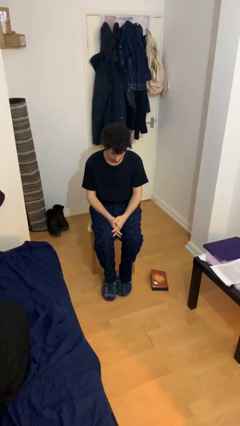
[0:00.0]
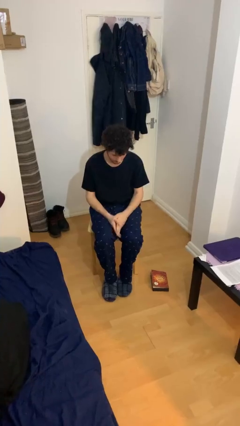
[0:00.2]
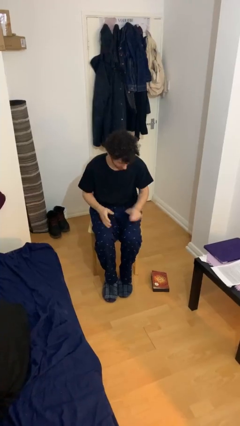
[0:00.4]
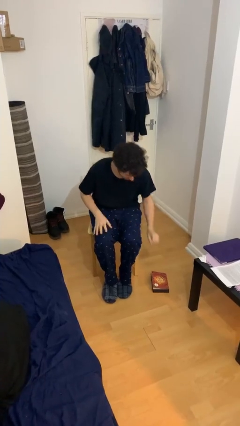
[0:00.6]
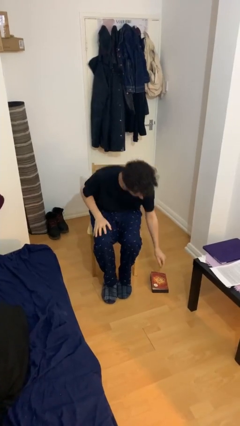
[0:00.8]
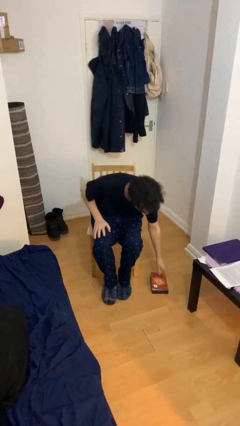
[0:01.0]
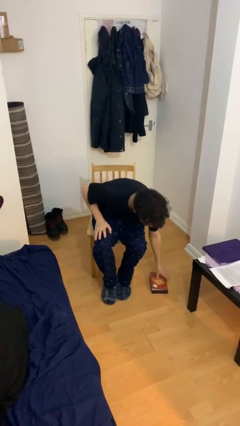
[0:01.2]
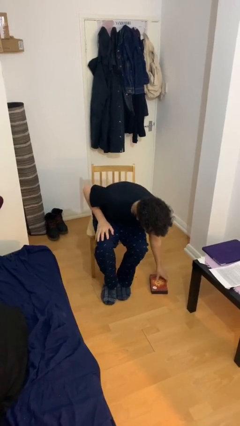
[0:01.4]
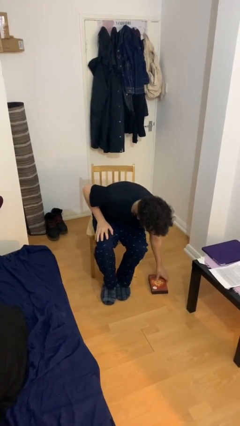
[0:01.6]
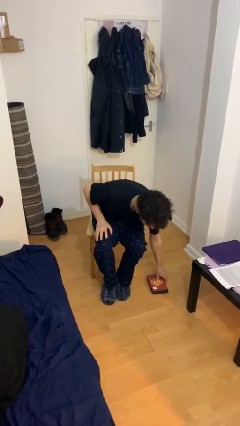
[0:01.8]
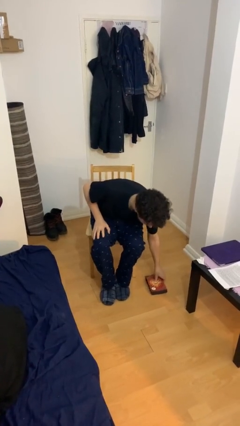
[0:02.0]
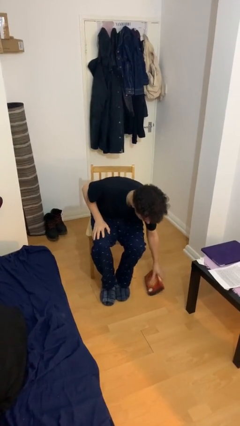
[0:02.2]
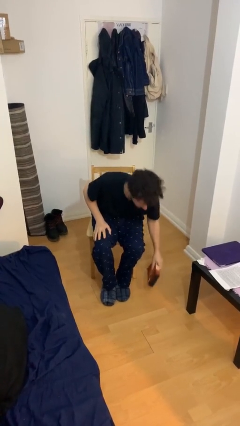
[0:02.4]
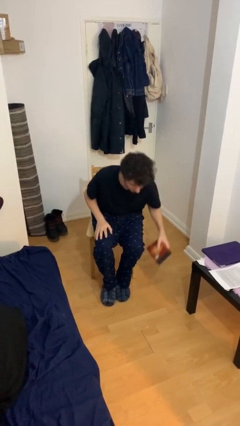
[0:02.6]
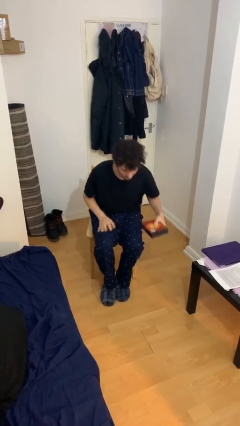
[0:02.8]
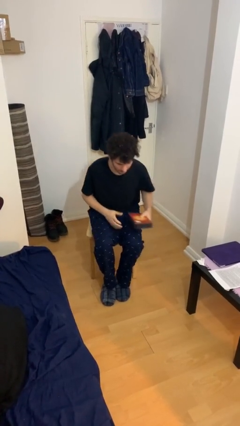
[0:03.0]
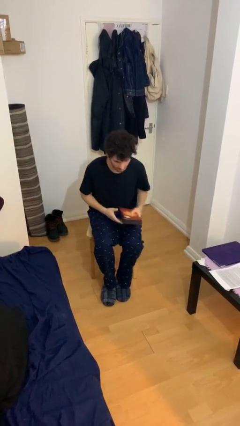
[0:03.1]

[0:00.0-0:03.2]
person picks up object from floor

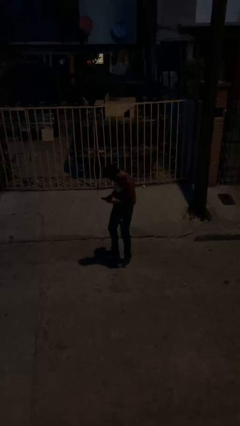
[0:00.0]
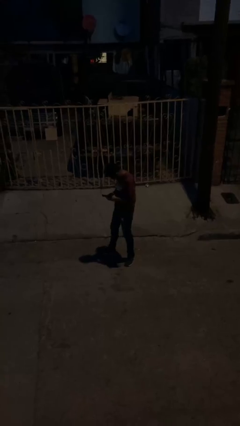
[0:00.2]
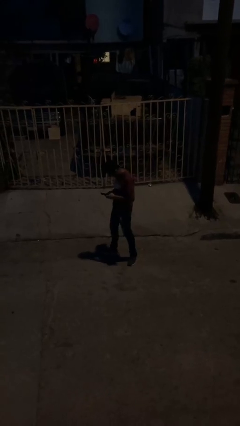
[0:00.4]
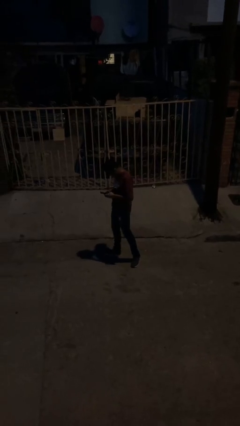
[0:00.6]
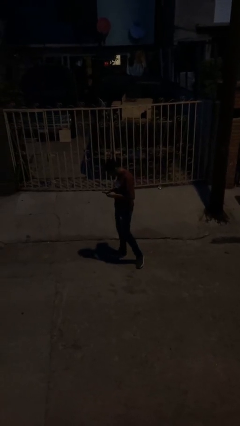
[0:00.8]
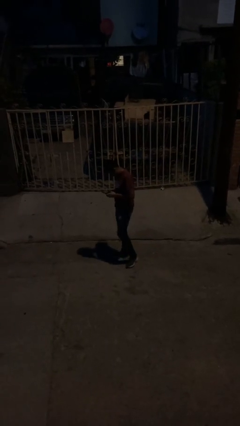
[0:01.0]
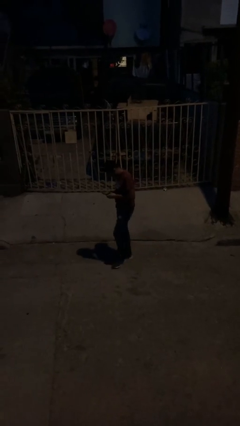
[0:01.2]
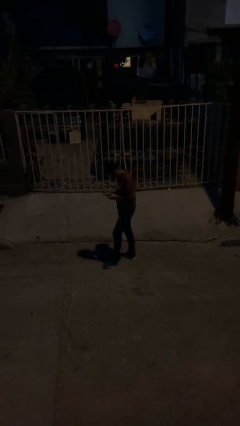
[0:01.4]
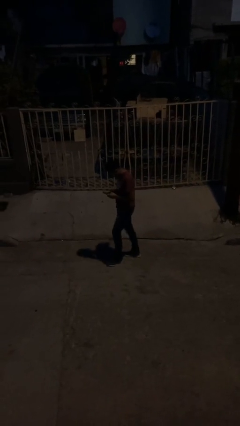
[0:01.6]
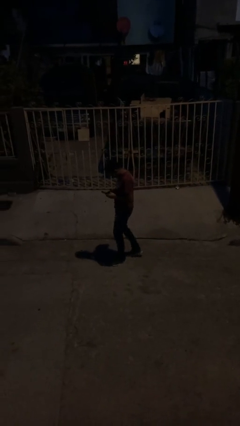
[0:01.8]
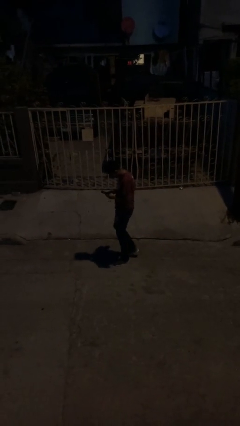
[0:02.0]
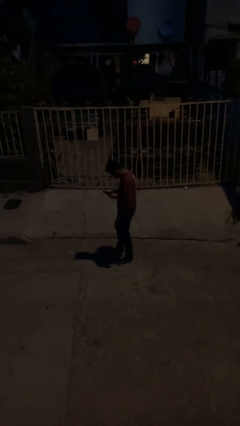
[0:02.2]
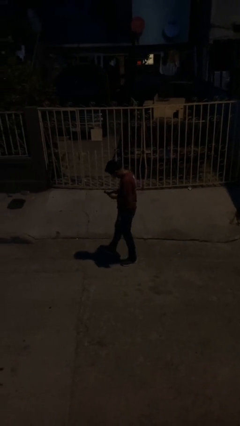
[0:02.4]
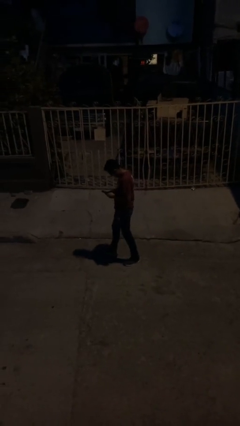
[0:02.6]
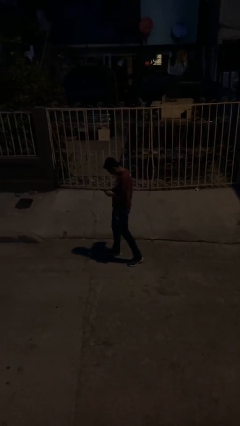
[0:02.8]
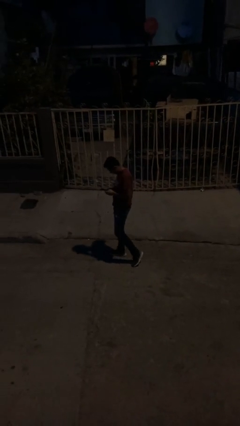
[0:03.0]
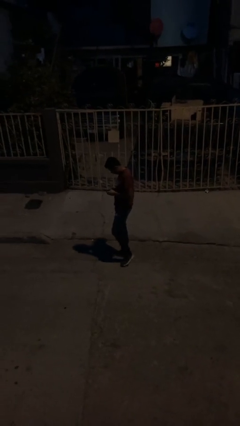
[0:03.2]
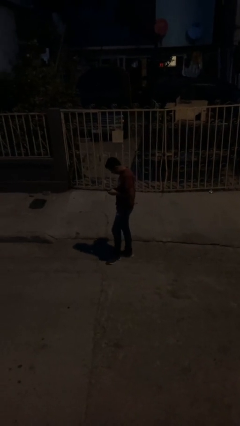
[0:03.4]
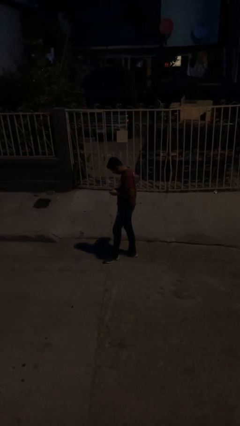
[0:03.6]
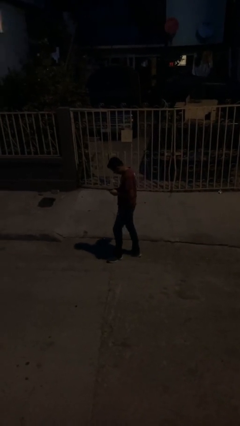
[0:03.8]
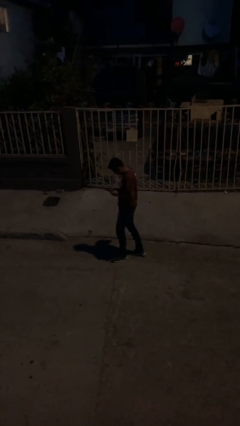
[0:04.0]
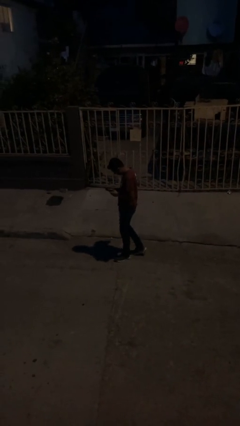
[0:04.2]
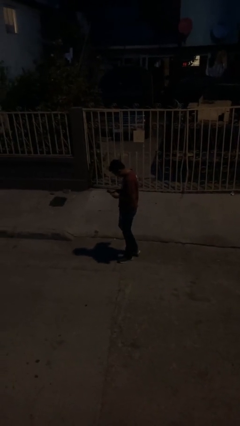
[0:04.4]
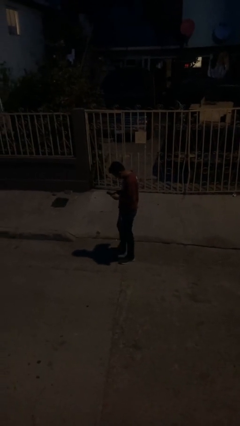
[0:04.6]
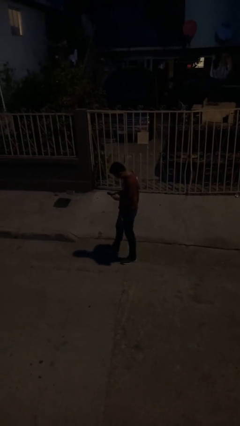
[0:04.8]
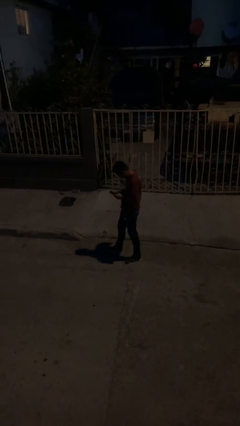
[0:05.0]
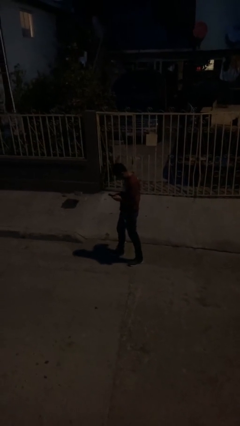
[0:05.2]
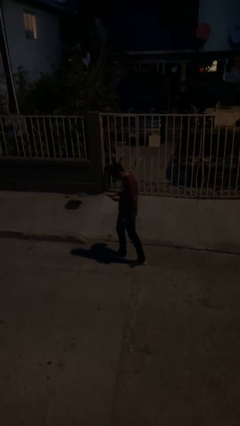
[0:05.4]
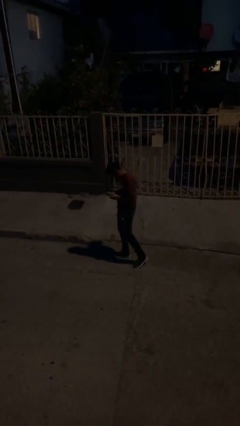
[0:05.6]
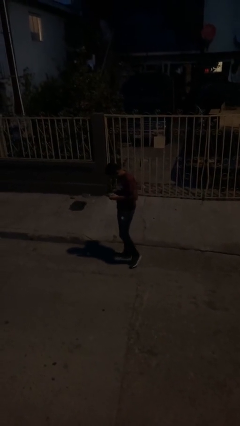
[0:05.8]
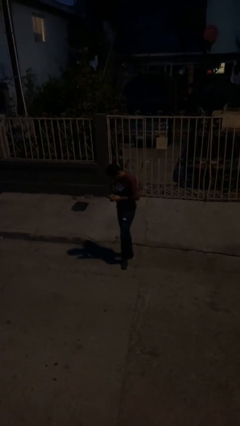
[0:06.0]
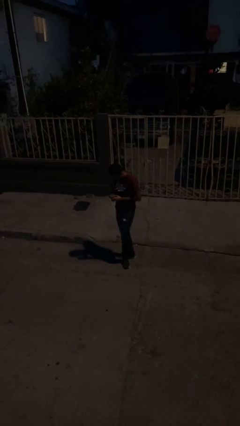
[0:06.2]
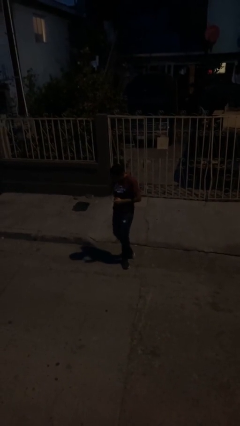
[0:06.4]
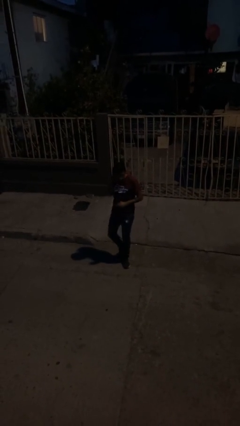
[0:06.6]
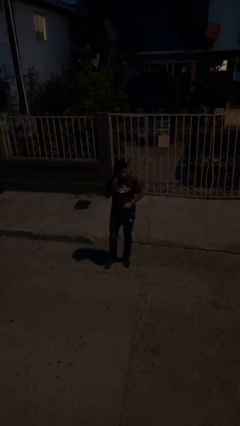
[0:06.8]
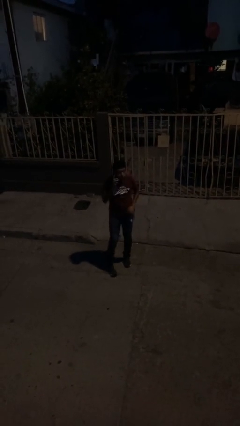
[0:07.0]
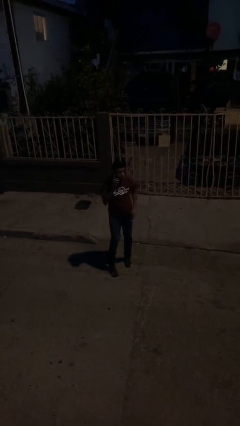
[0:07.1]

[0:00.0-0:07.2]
person texts on phone

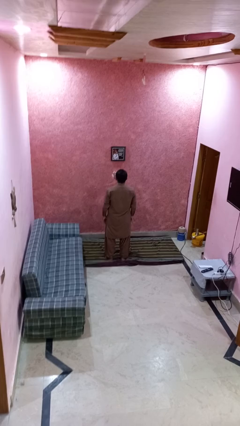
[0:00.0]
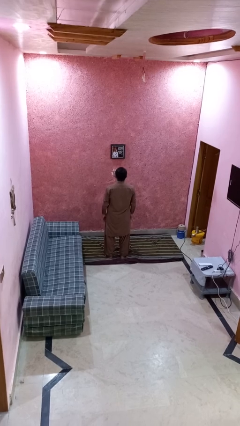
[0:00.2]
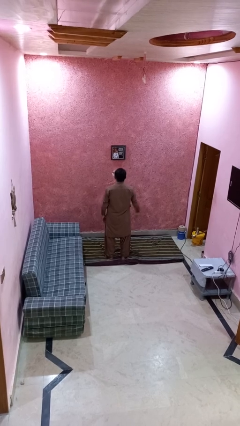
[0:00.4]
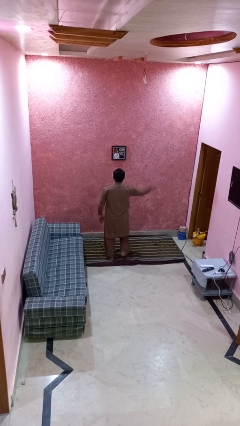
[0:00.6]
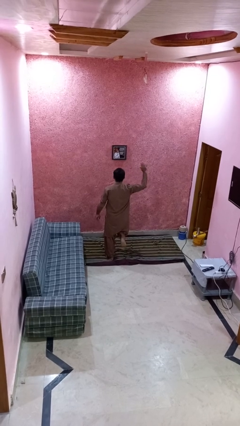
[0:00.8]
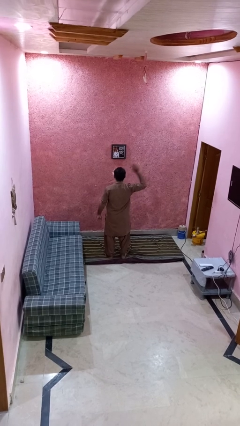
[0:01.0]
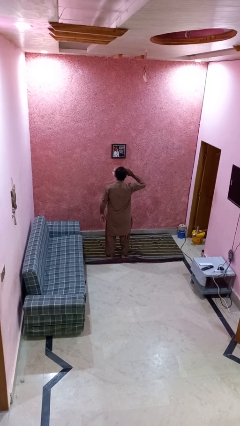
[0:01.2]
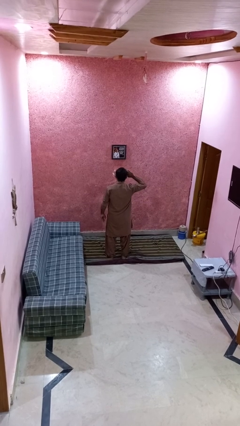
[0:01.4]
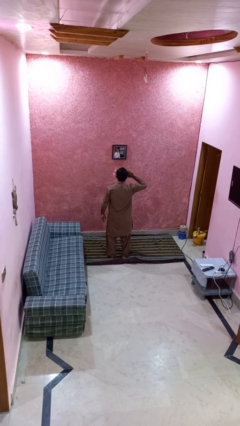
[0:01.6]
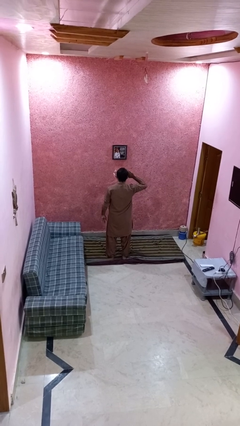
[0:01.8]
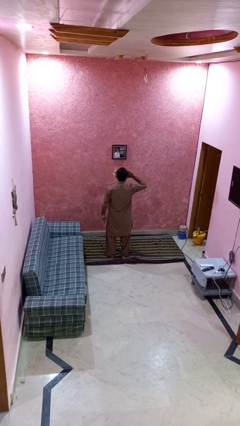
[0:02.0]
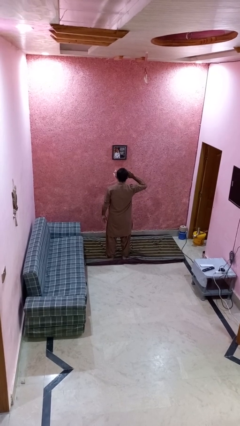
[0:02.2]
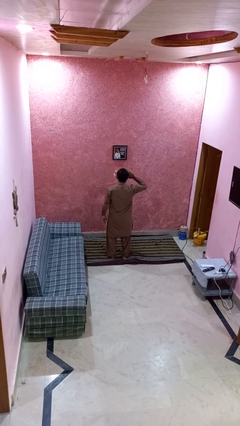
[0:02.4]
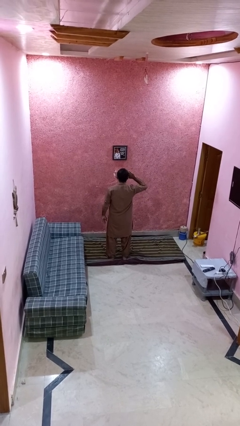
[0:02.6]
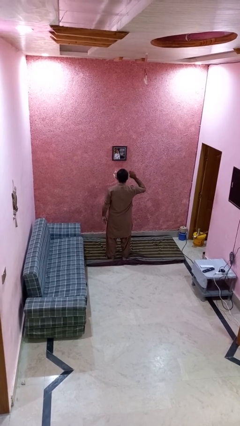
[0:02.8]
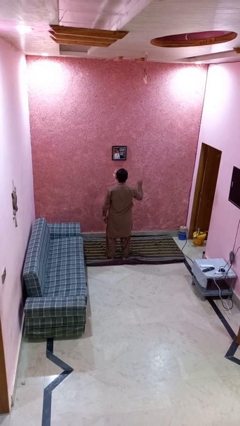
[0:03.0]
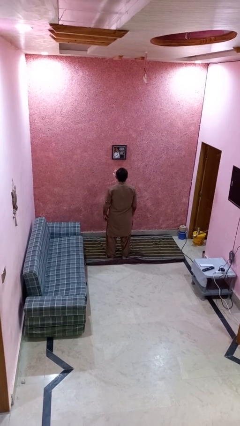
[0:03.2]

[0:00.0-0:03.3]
person salutes

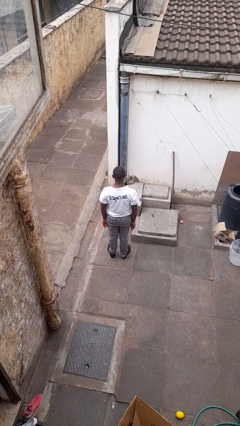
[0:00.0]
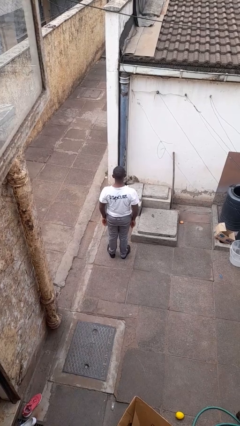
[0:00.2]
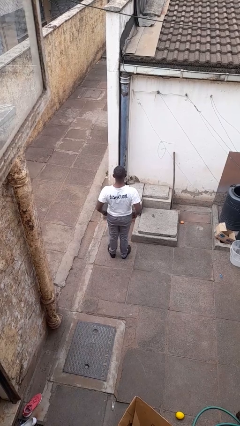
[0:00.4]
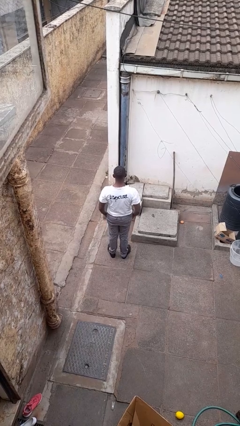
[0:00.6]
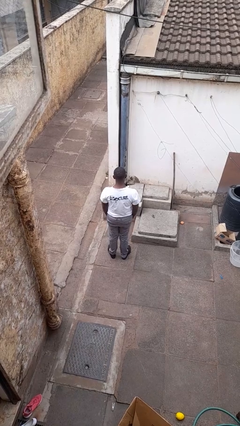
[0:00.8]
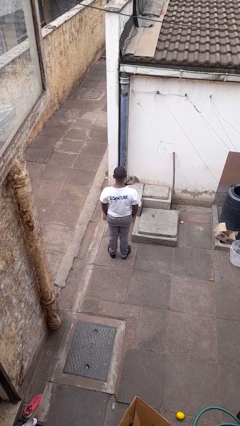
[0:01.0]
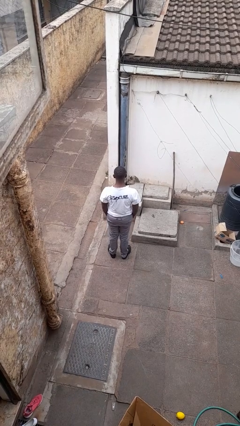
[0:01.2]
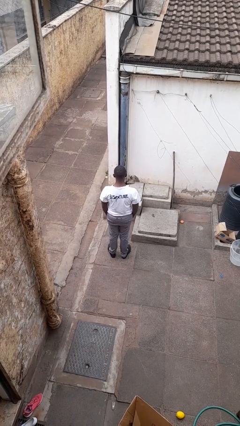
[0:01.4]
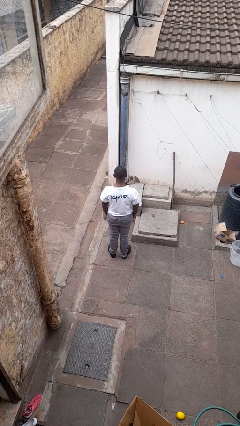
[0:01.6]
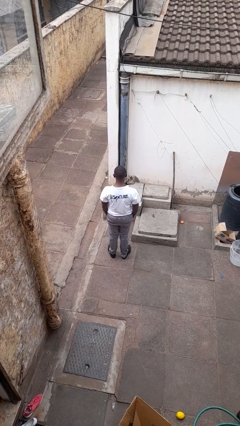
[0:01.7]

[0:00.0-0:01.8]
person puts hands in back pockets

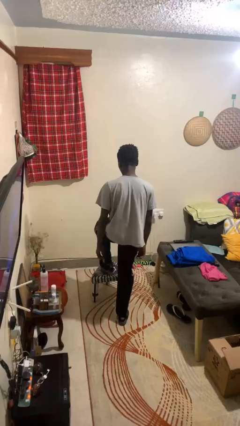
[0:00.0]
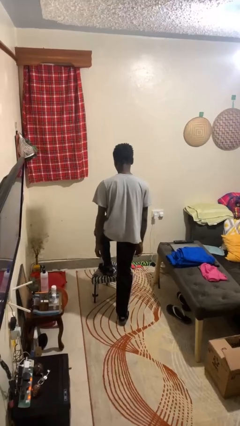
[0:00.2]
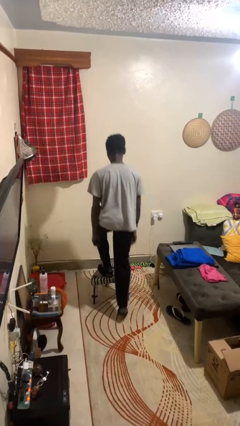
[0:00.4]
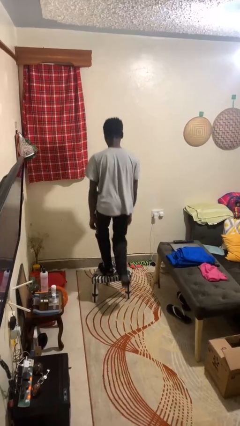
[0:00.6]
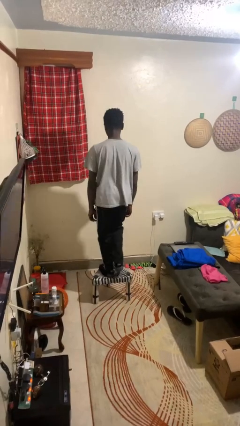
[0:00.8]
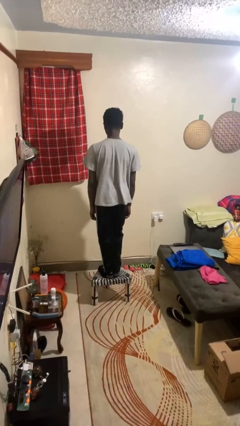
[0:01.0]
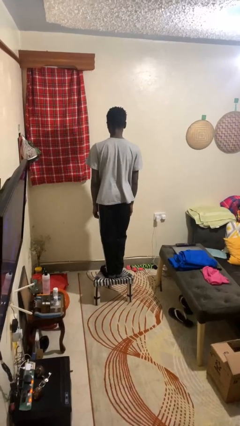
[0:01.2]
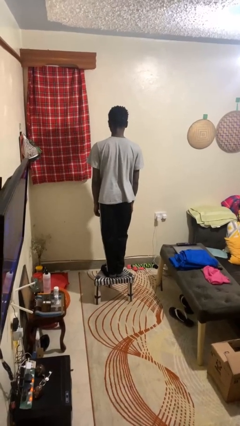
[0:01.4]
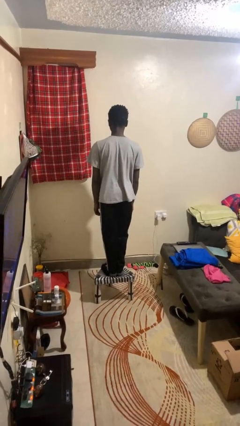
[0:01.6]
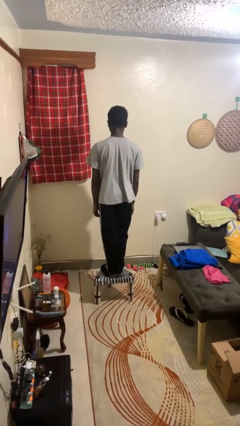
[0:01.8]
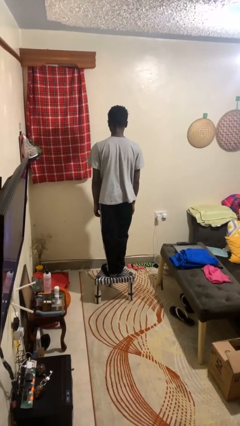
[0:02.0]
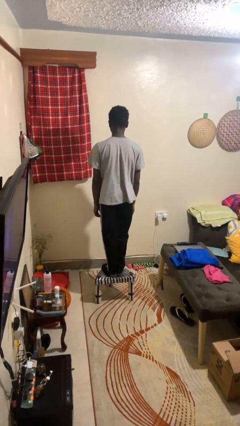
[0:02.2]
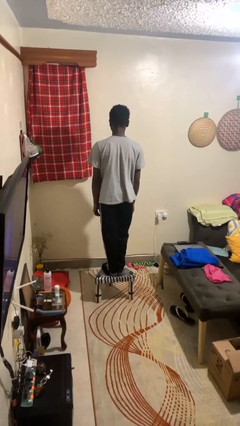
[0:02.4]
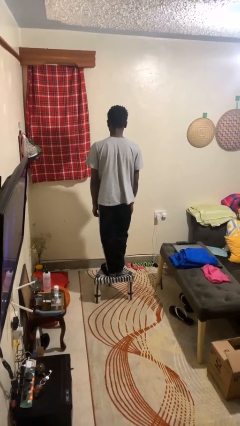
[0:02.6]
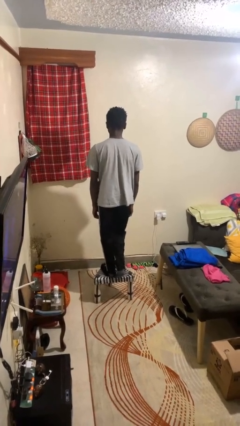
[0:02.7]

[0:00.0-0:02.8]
person climbs on chair
